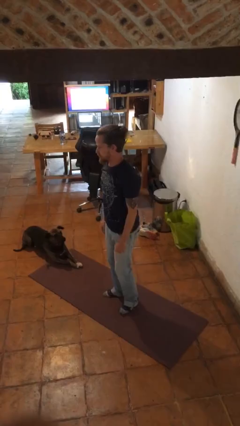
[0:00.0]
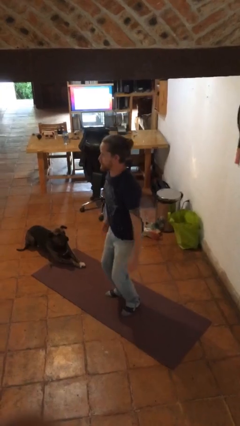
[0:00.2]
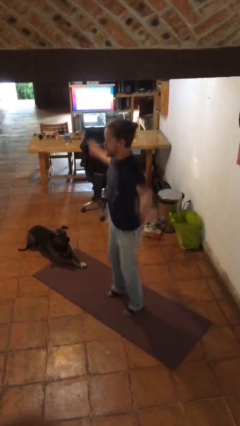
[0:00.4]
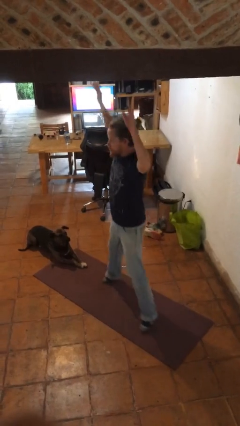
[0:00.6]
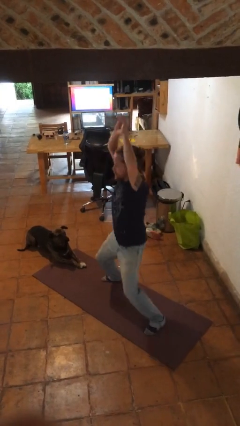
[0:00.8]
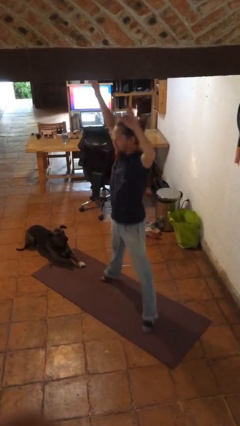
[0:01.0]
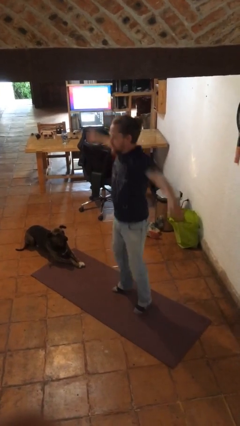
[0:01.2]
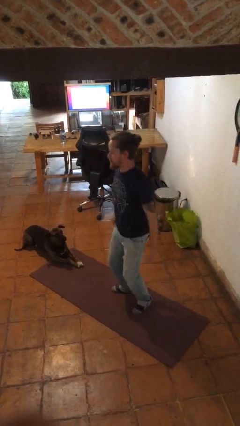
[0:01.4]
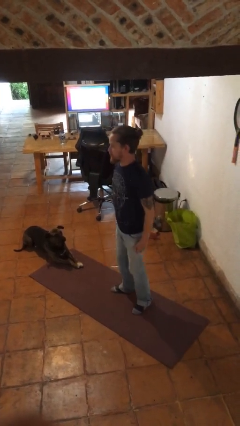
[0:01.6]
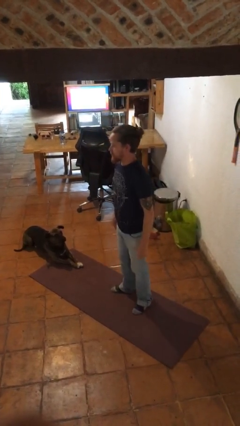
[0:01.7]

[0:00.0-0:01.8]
person exercises with jumping jacks

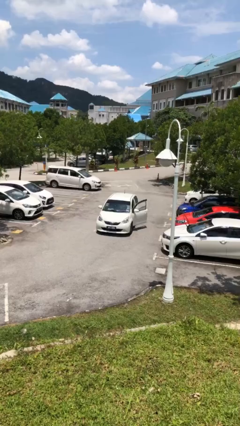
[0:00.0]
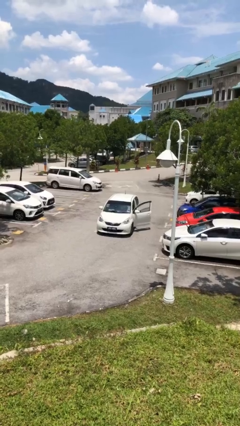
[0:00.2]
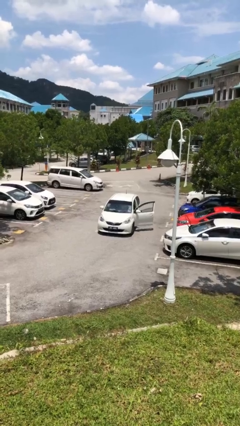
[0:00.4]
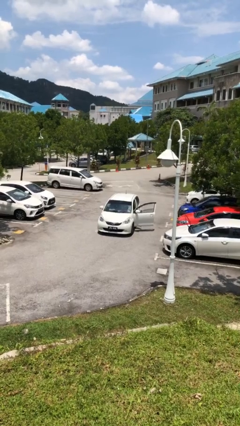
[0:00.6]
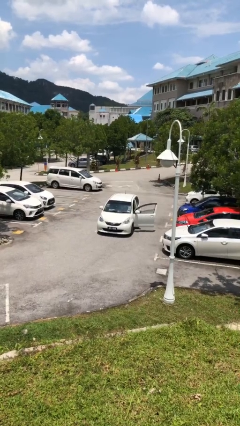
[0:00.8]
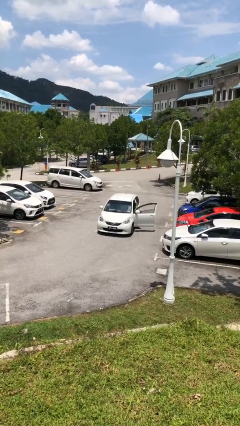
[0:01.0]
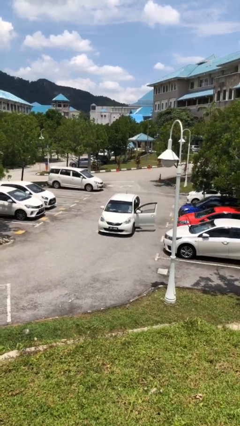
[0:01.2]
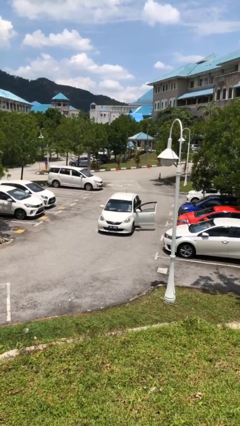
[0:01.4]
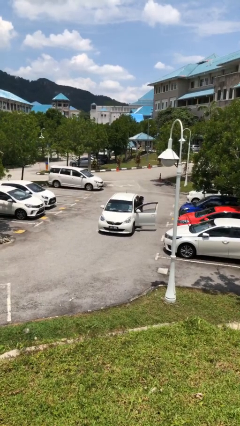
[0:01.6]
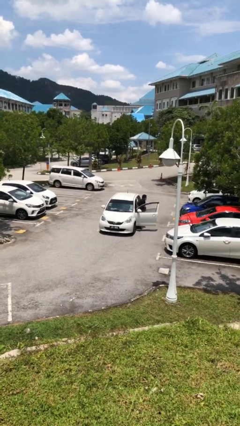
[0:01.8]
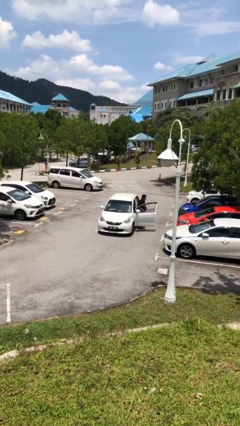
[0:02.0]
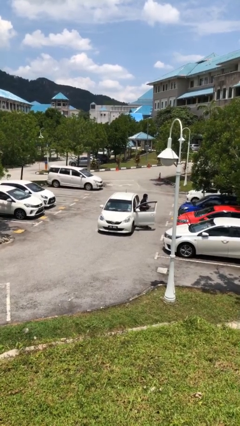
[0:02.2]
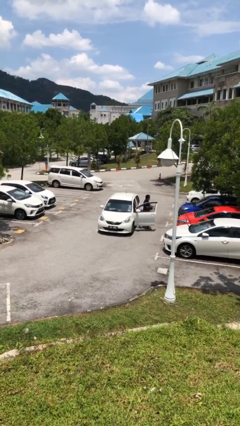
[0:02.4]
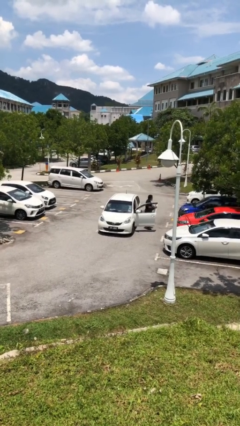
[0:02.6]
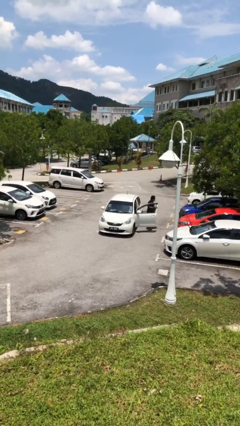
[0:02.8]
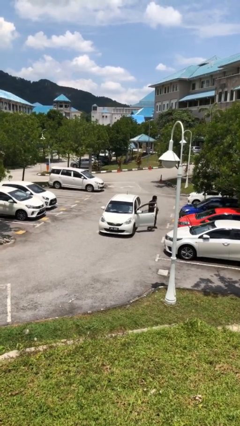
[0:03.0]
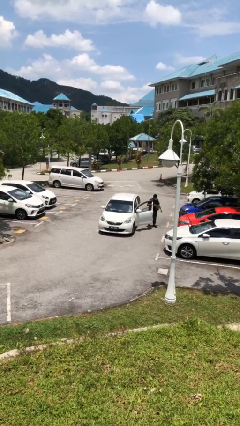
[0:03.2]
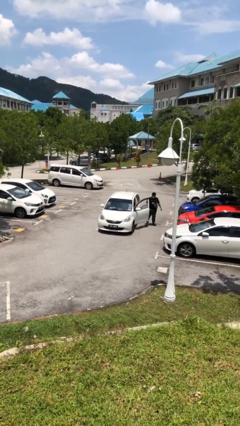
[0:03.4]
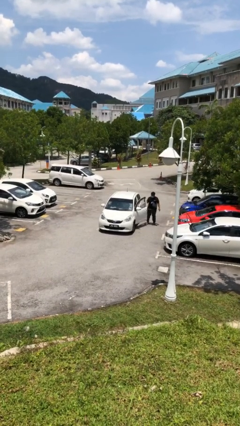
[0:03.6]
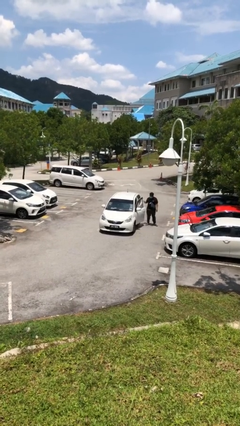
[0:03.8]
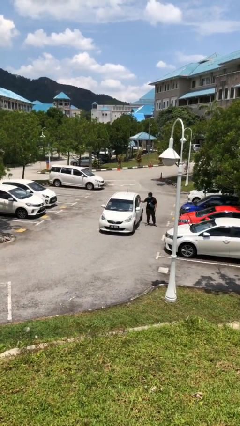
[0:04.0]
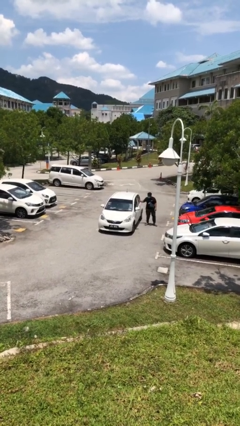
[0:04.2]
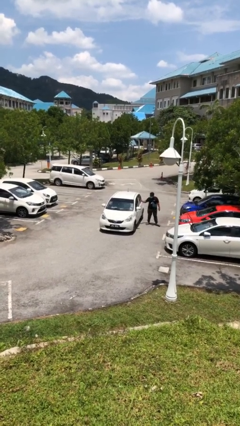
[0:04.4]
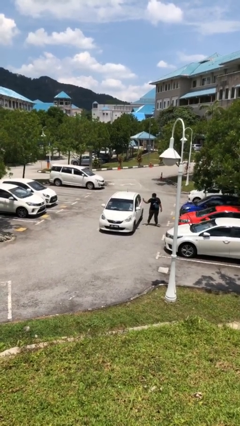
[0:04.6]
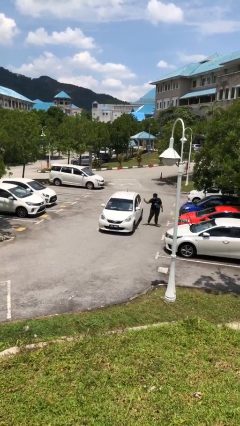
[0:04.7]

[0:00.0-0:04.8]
car drops off person

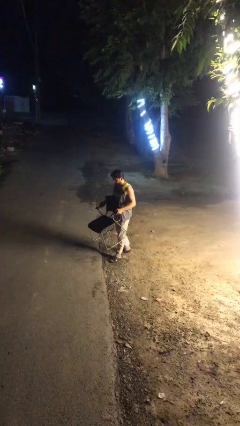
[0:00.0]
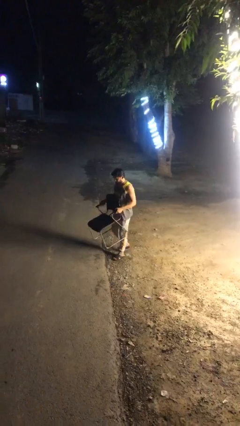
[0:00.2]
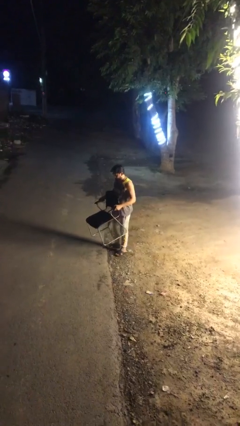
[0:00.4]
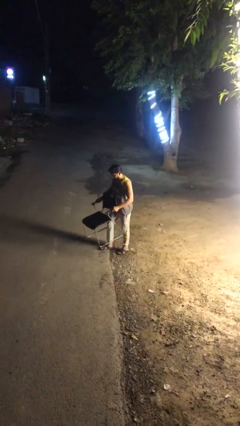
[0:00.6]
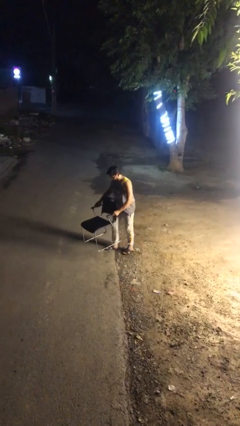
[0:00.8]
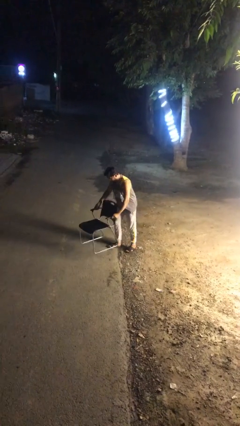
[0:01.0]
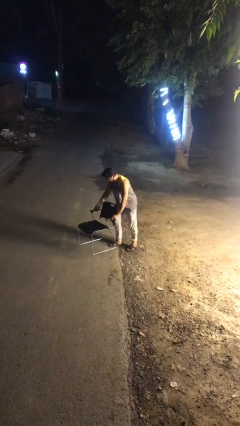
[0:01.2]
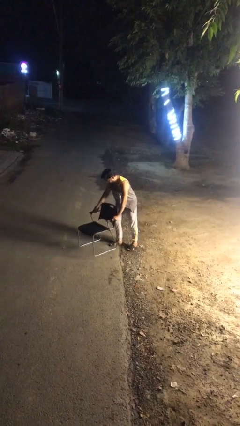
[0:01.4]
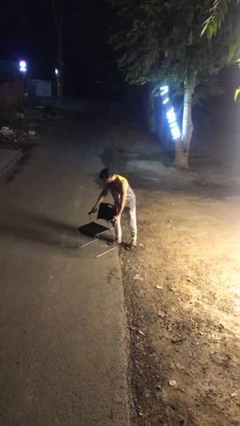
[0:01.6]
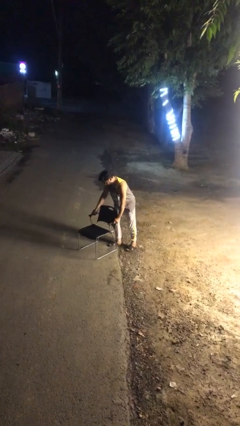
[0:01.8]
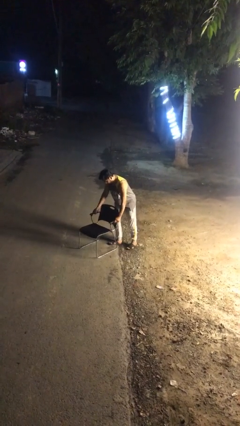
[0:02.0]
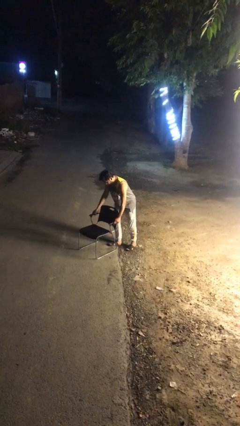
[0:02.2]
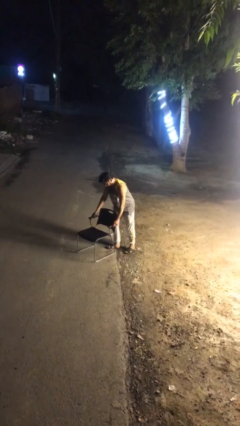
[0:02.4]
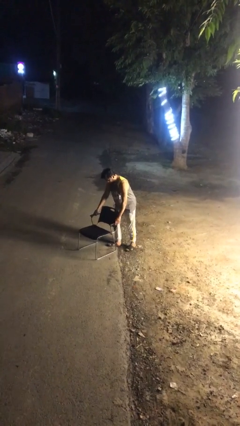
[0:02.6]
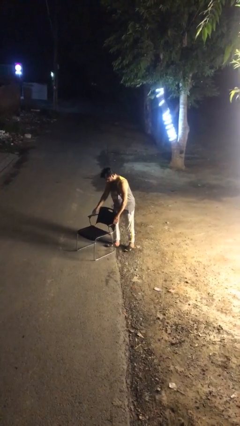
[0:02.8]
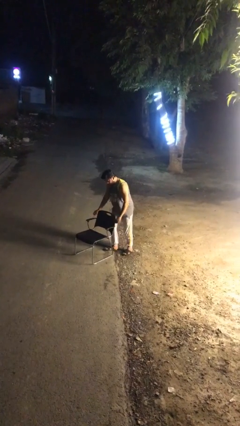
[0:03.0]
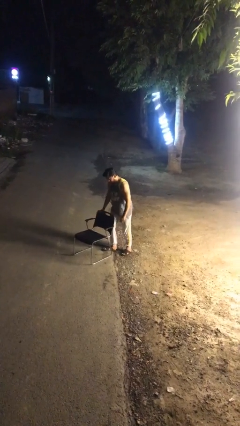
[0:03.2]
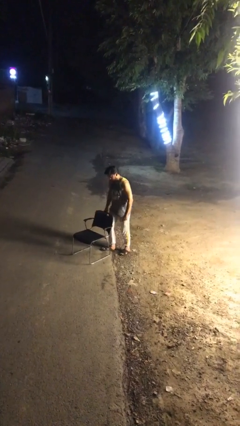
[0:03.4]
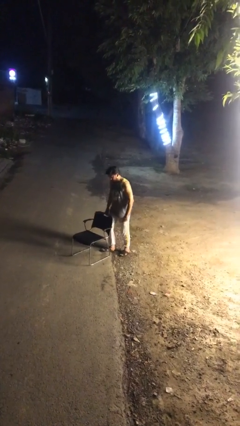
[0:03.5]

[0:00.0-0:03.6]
person puts down object on floor

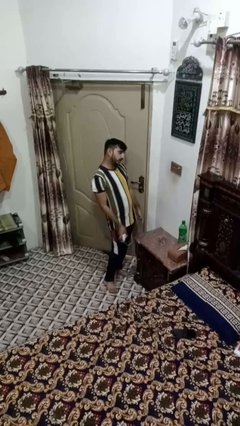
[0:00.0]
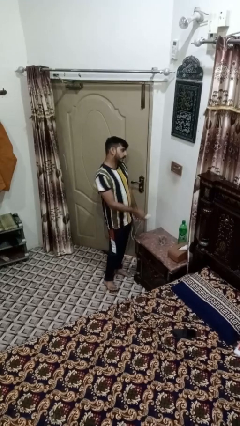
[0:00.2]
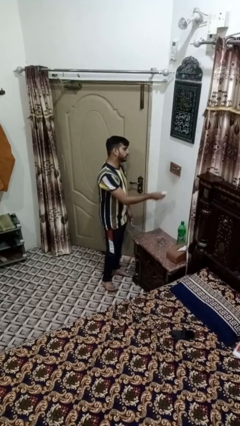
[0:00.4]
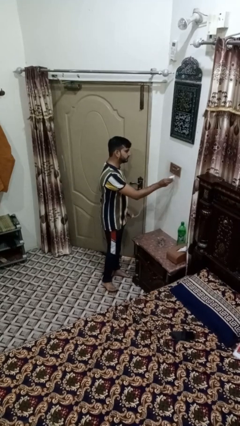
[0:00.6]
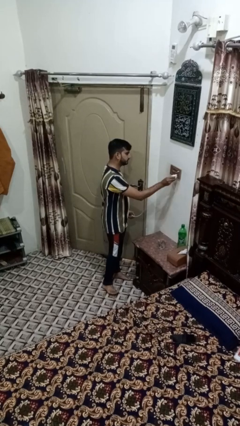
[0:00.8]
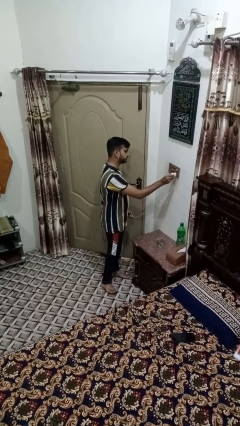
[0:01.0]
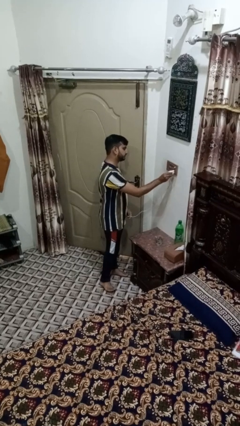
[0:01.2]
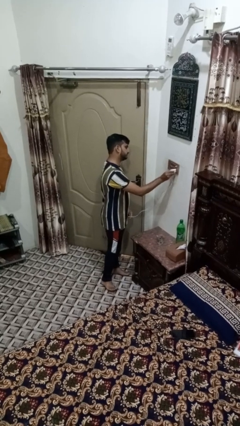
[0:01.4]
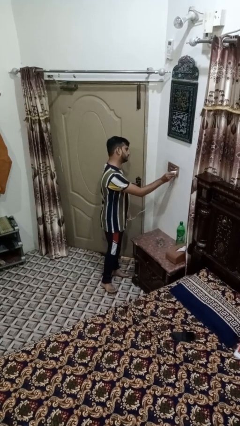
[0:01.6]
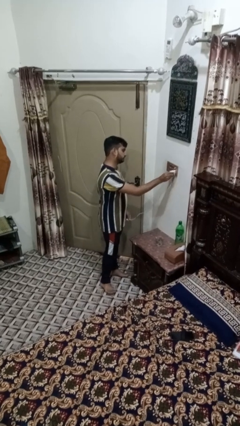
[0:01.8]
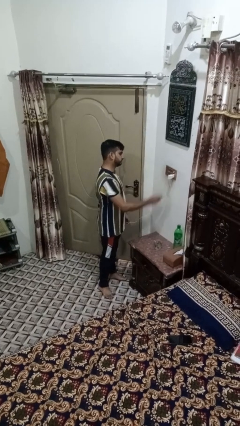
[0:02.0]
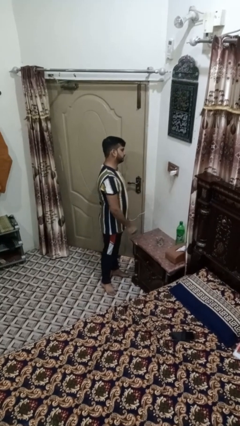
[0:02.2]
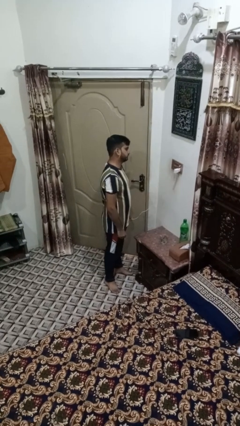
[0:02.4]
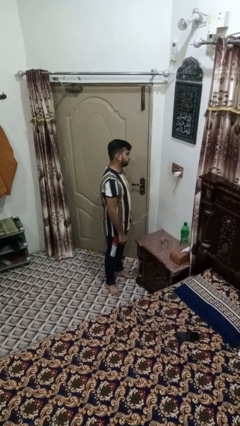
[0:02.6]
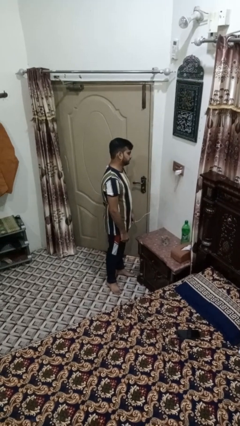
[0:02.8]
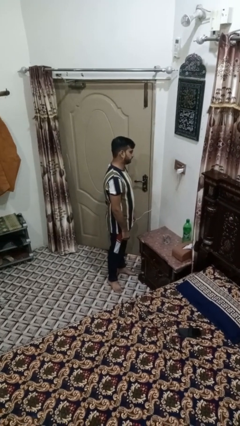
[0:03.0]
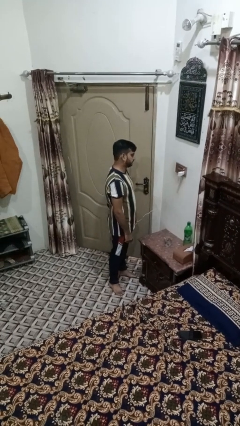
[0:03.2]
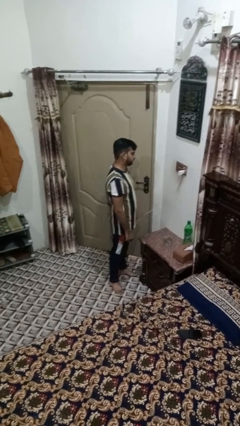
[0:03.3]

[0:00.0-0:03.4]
person plugs into electrical socket

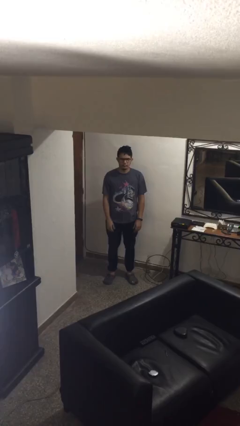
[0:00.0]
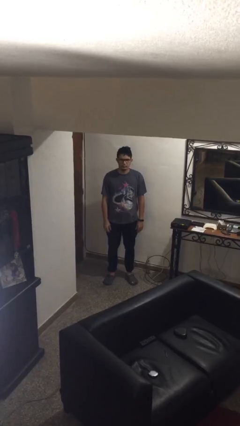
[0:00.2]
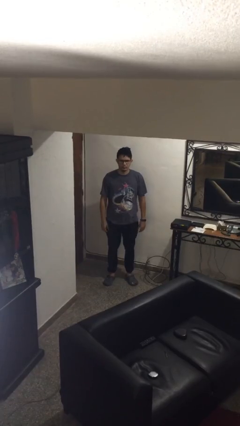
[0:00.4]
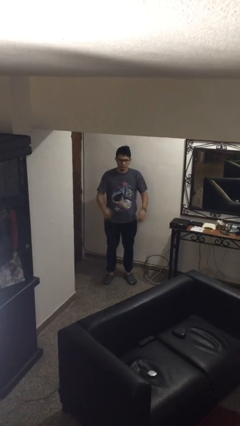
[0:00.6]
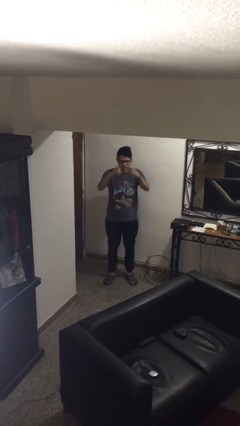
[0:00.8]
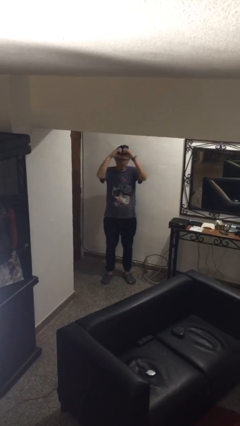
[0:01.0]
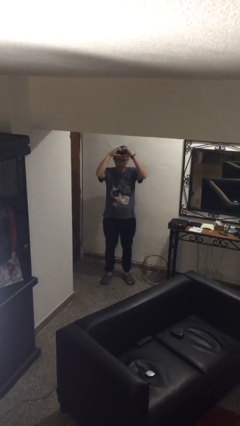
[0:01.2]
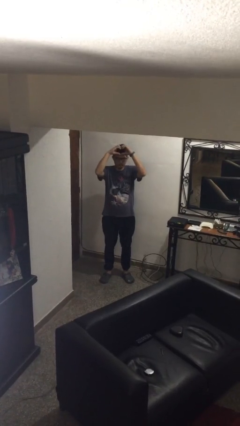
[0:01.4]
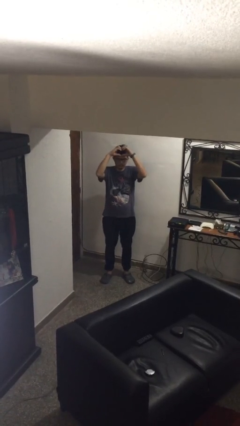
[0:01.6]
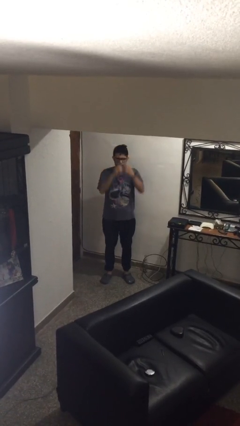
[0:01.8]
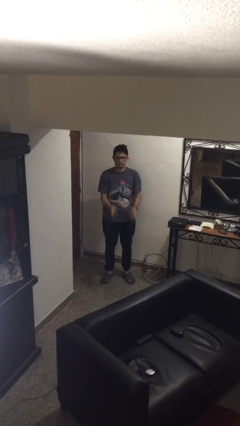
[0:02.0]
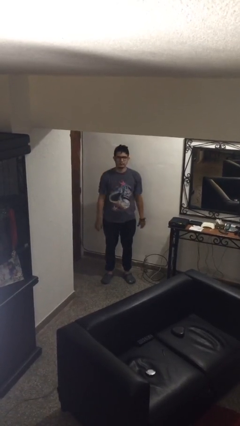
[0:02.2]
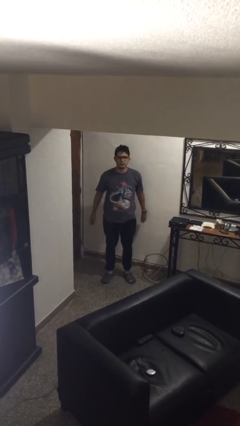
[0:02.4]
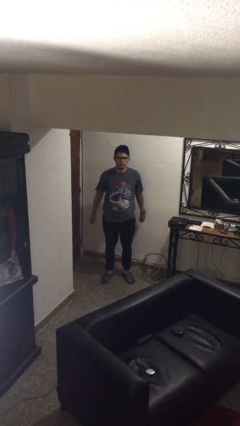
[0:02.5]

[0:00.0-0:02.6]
person gestures heart

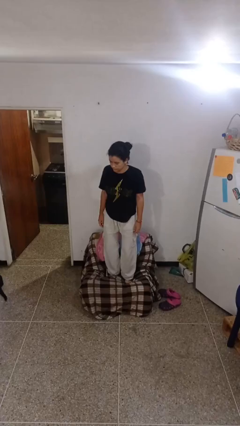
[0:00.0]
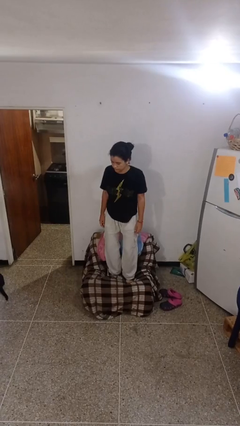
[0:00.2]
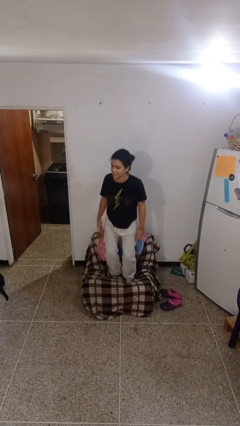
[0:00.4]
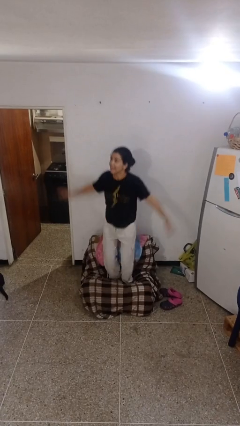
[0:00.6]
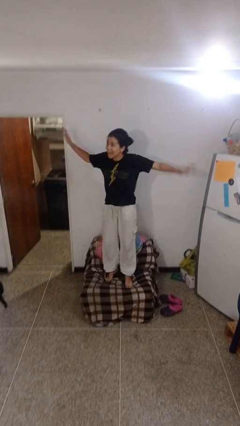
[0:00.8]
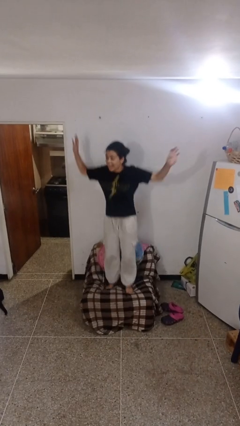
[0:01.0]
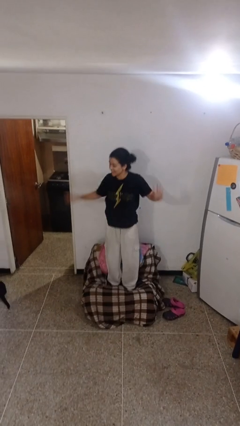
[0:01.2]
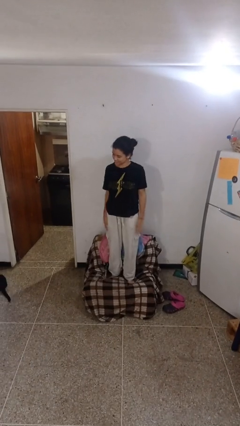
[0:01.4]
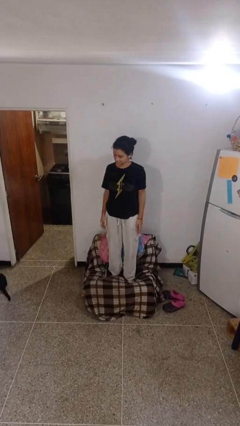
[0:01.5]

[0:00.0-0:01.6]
person jumps on couch
